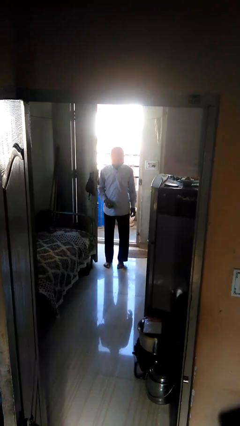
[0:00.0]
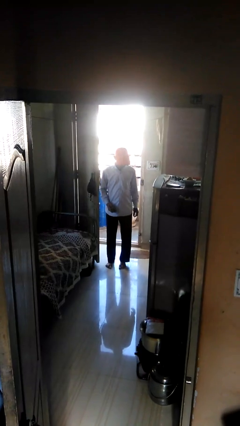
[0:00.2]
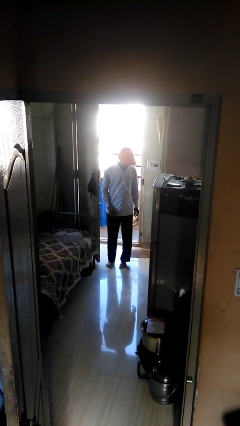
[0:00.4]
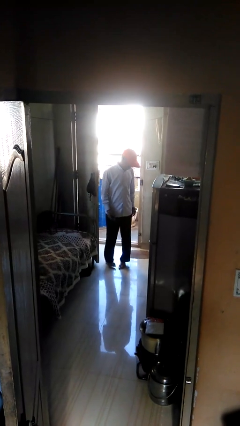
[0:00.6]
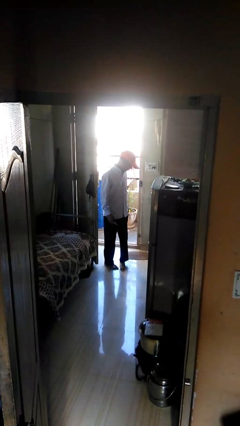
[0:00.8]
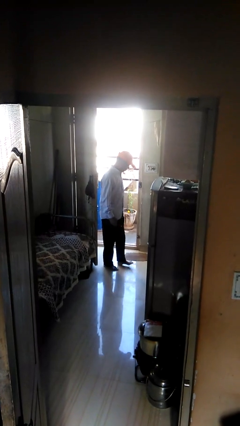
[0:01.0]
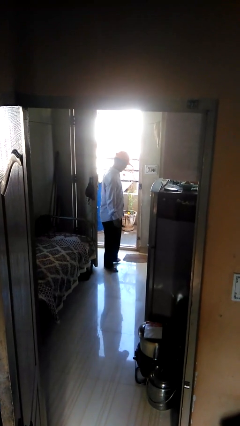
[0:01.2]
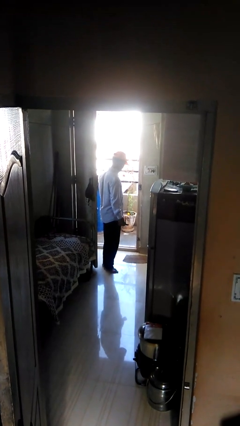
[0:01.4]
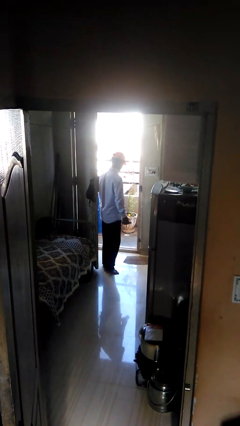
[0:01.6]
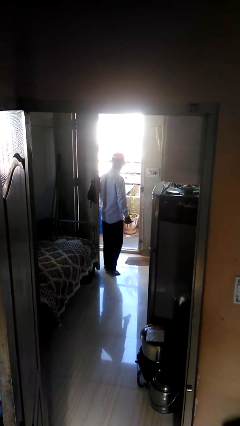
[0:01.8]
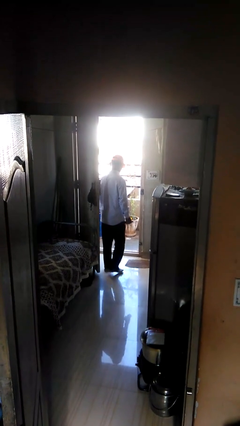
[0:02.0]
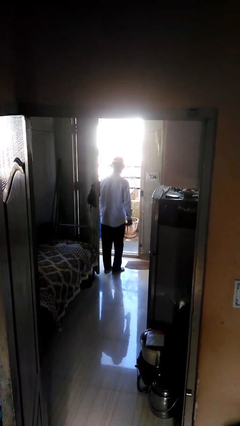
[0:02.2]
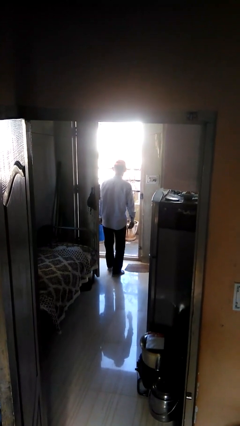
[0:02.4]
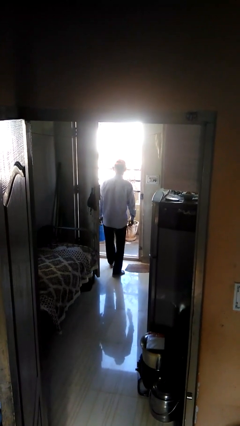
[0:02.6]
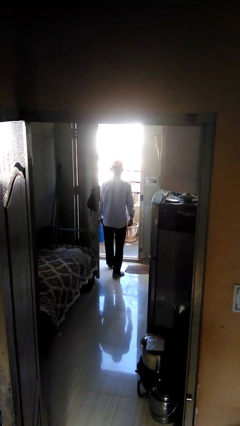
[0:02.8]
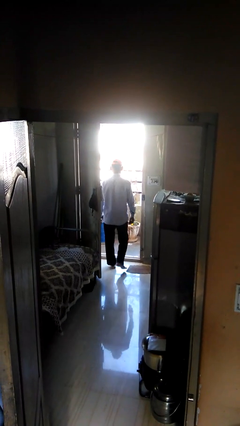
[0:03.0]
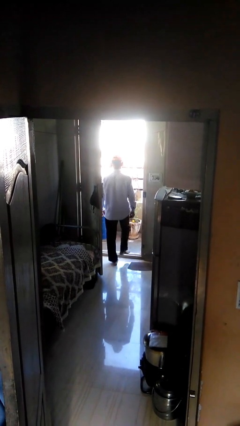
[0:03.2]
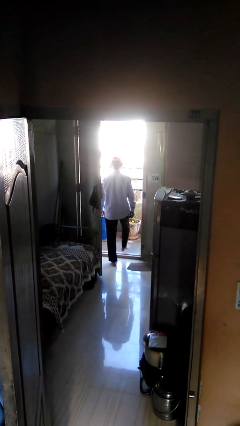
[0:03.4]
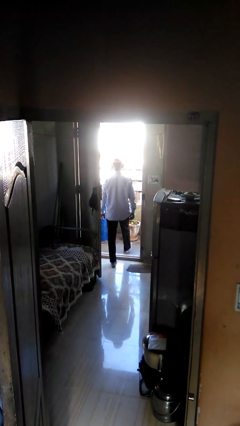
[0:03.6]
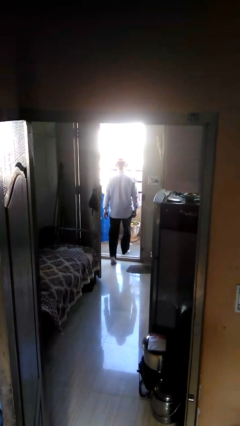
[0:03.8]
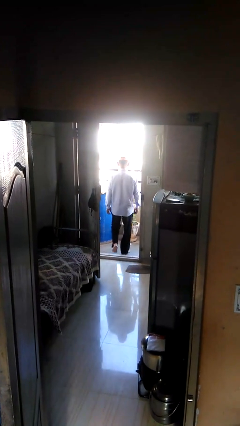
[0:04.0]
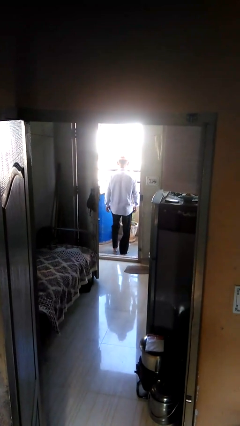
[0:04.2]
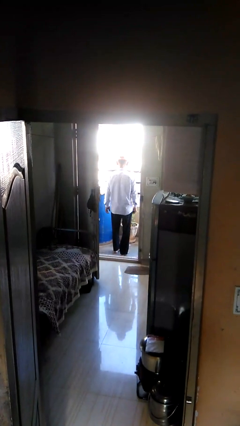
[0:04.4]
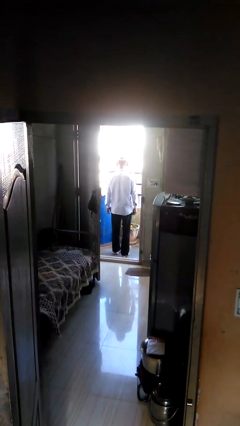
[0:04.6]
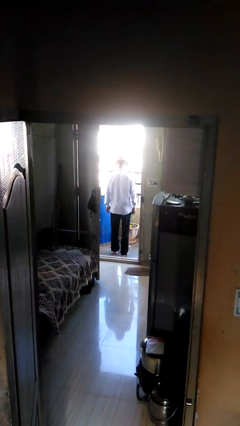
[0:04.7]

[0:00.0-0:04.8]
person exits scene through structure

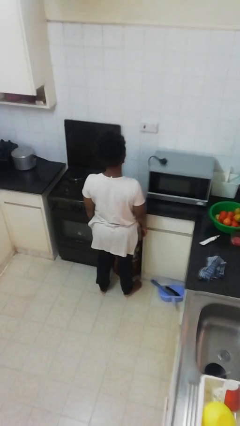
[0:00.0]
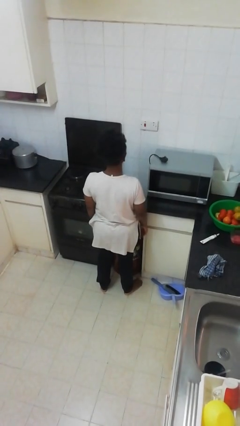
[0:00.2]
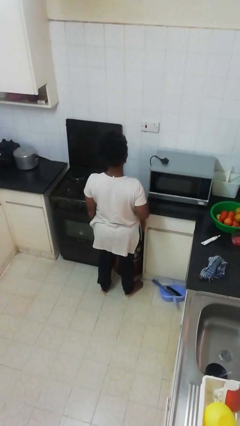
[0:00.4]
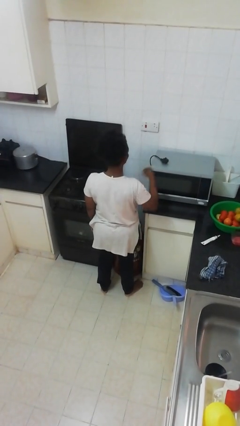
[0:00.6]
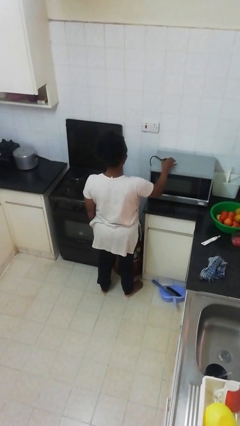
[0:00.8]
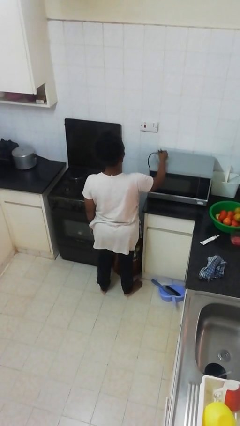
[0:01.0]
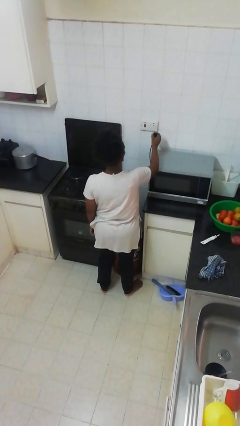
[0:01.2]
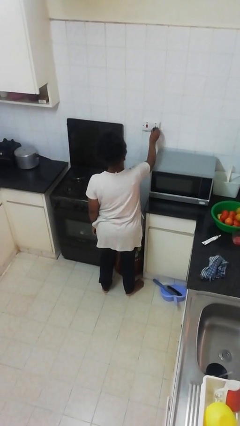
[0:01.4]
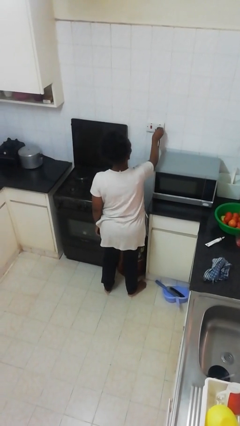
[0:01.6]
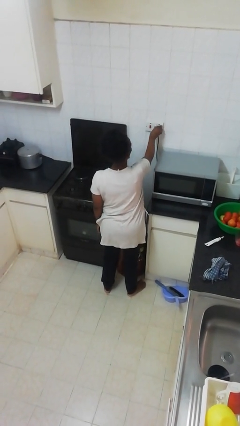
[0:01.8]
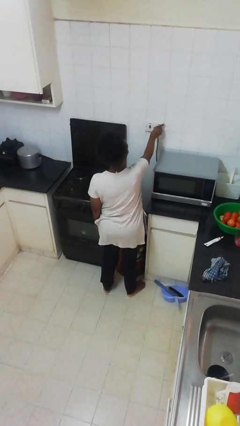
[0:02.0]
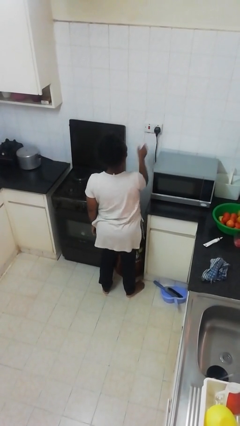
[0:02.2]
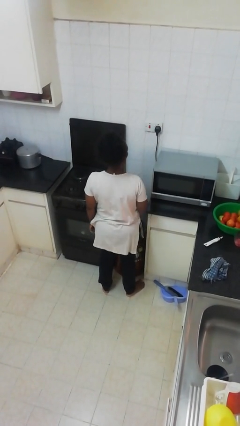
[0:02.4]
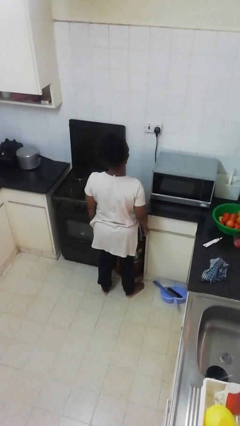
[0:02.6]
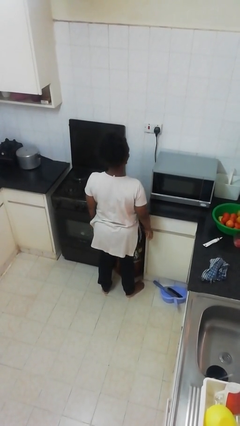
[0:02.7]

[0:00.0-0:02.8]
person plugs into electrical socket

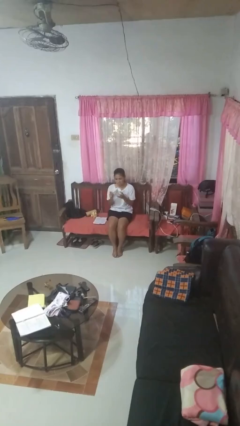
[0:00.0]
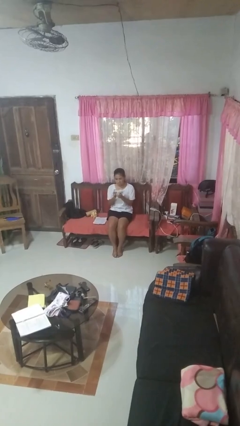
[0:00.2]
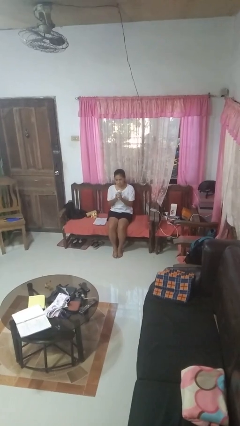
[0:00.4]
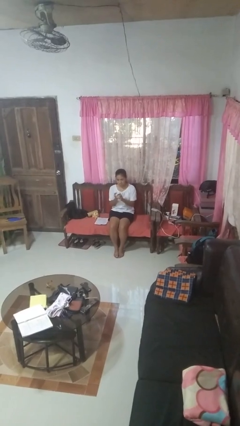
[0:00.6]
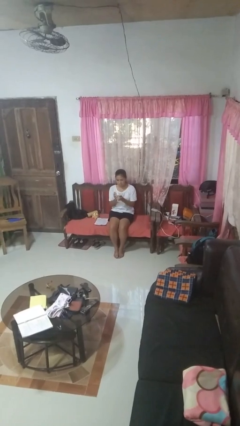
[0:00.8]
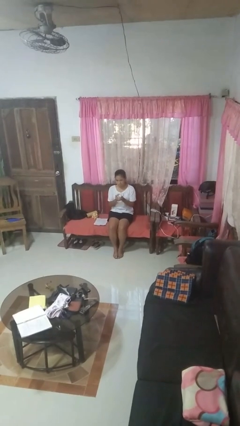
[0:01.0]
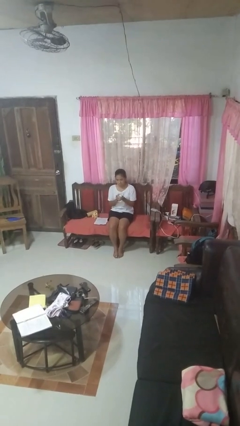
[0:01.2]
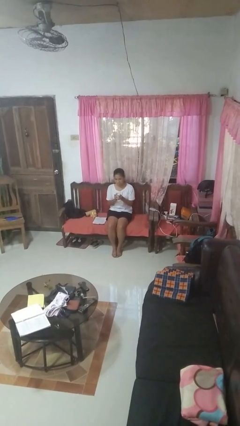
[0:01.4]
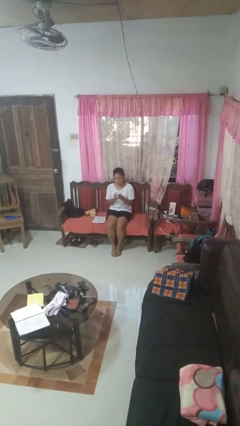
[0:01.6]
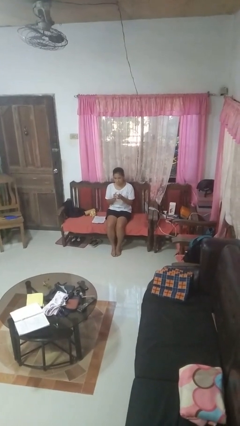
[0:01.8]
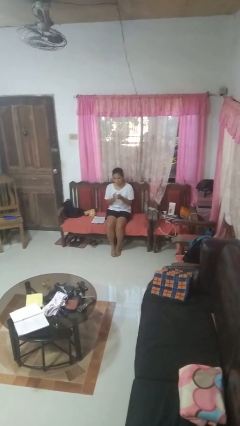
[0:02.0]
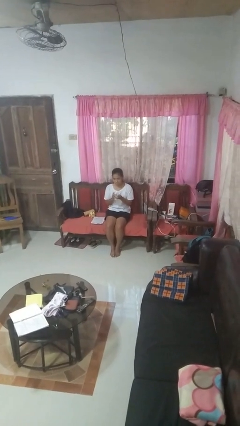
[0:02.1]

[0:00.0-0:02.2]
person crumples paper

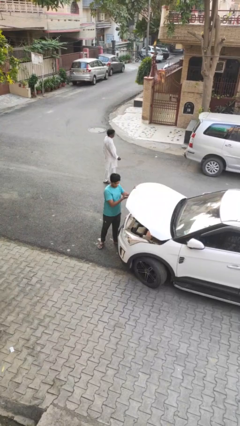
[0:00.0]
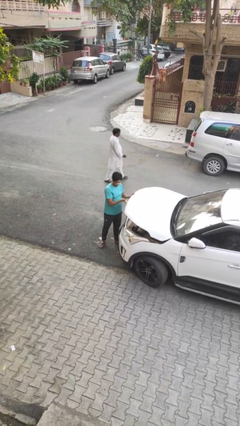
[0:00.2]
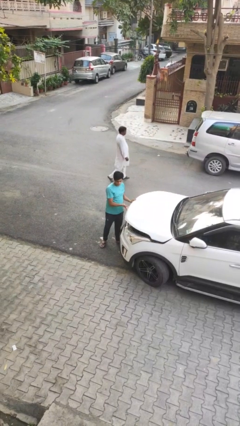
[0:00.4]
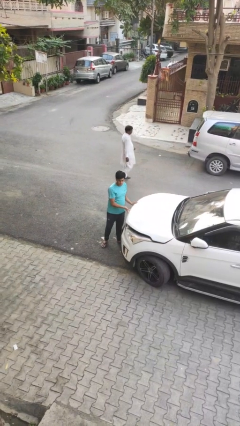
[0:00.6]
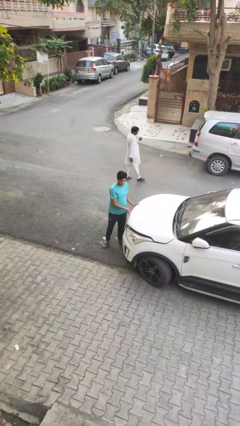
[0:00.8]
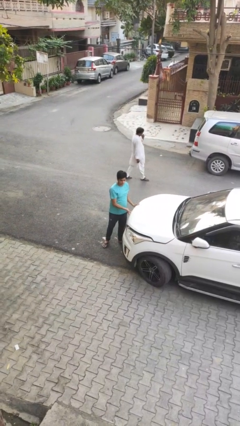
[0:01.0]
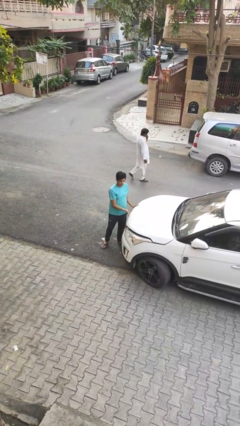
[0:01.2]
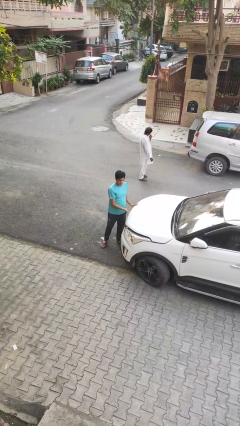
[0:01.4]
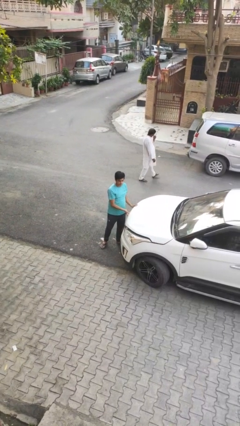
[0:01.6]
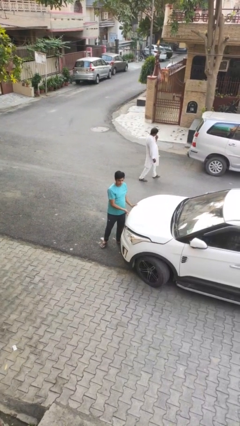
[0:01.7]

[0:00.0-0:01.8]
person closes car hood

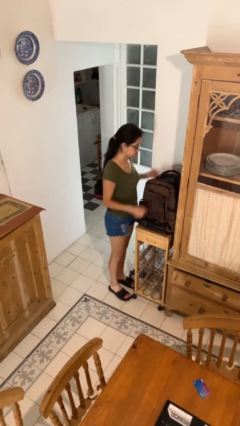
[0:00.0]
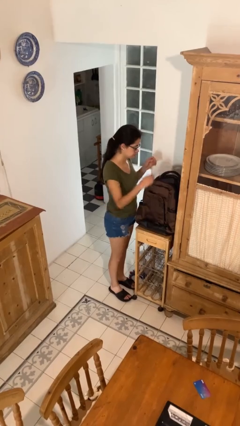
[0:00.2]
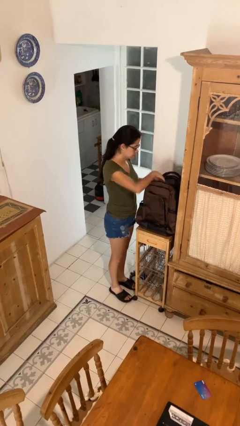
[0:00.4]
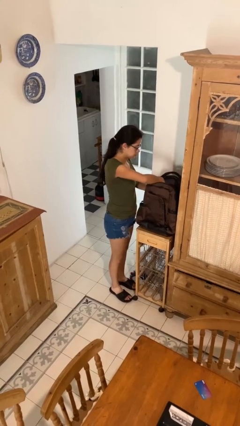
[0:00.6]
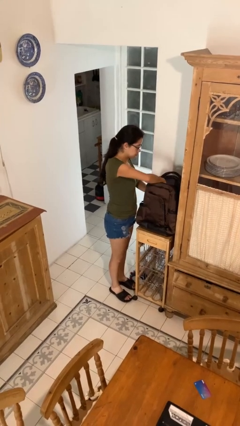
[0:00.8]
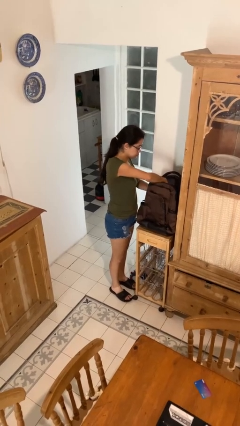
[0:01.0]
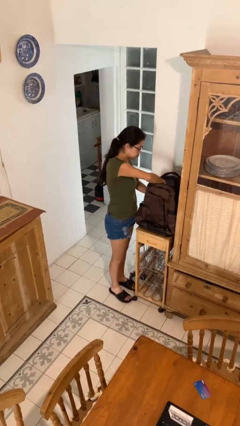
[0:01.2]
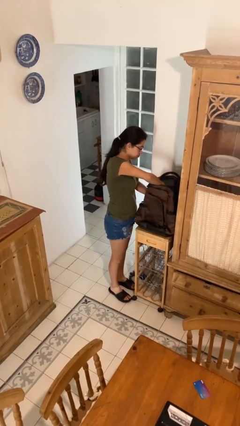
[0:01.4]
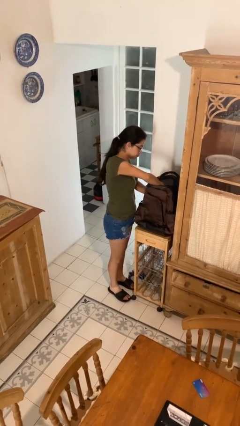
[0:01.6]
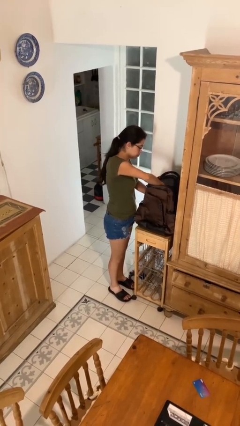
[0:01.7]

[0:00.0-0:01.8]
person searches in backpack

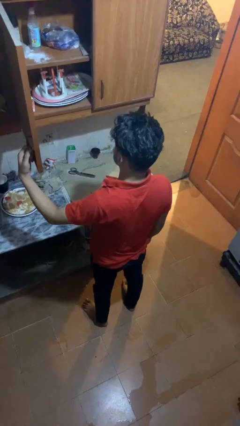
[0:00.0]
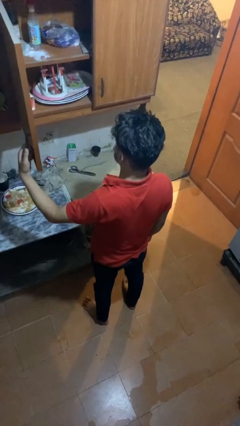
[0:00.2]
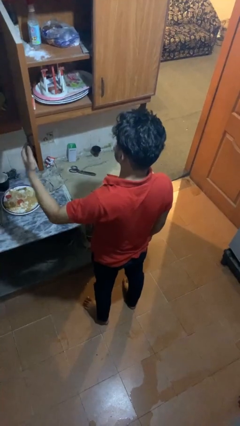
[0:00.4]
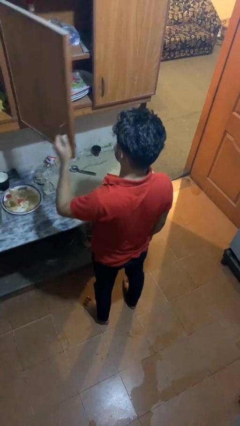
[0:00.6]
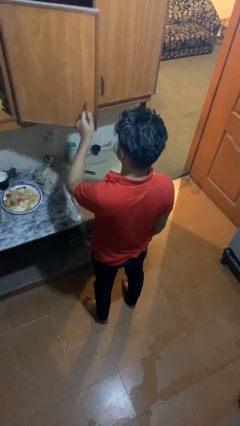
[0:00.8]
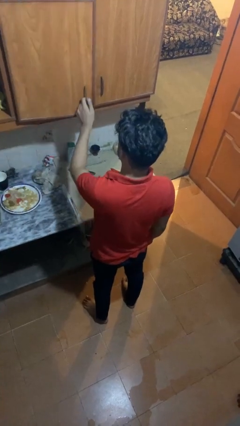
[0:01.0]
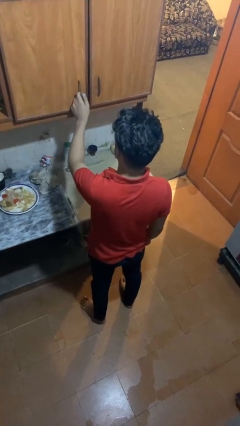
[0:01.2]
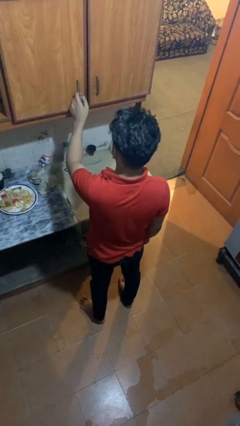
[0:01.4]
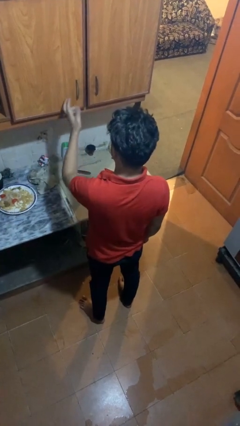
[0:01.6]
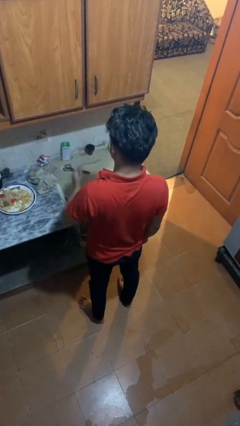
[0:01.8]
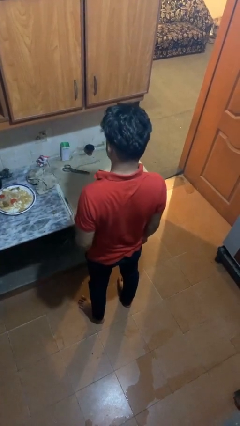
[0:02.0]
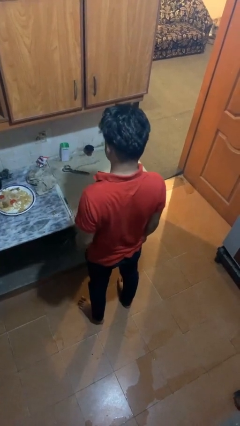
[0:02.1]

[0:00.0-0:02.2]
person closes cabinet

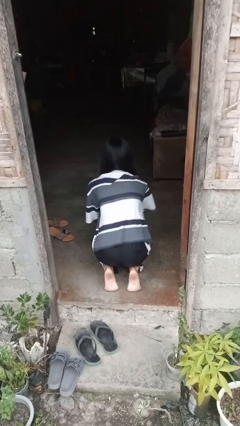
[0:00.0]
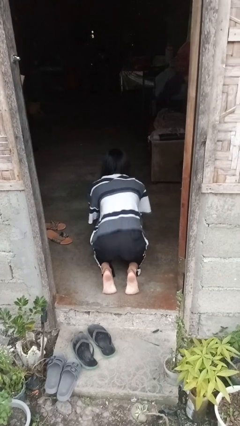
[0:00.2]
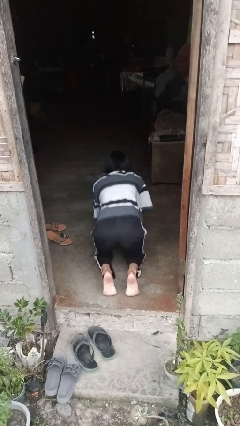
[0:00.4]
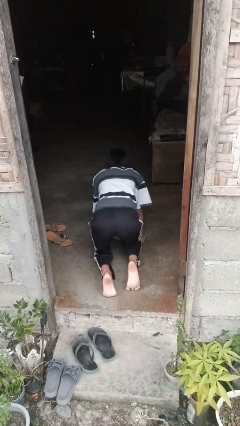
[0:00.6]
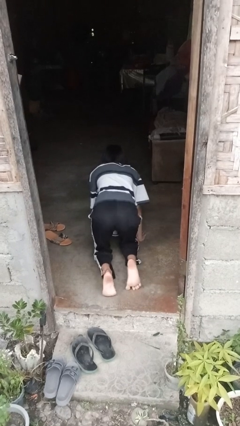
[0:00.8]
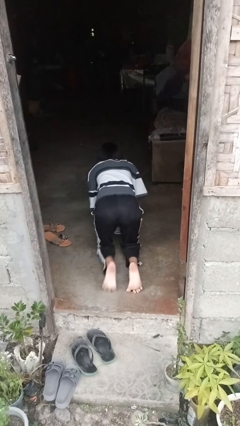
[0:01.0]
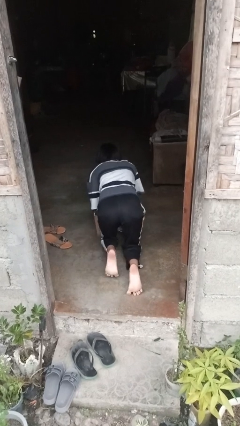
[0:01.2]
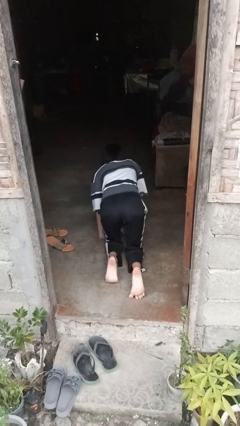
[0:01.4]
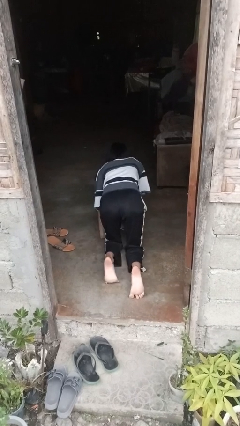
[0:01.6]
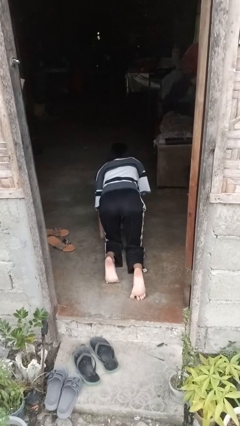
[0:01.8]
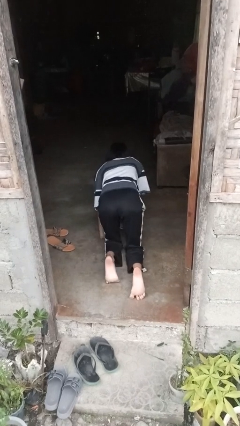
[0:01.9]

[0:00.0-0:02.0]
person crawls
